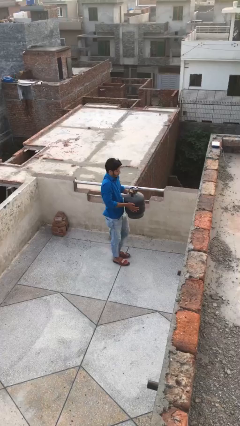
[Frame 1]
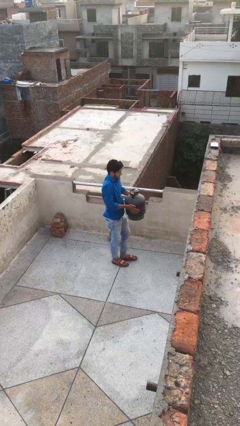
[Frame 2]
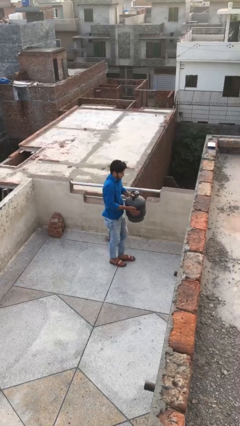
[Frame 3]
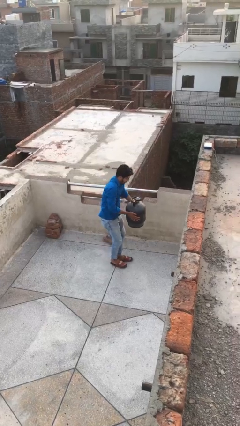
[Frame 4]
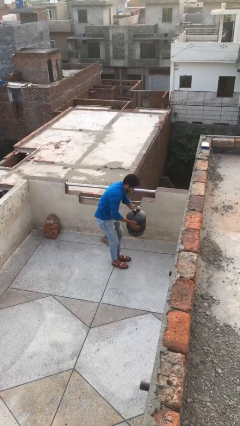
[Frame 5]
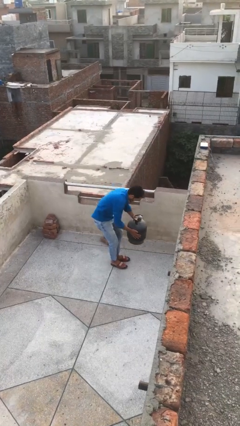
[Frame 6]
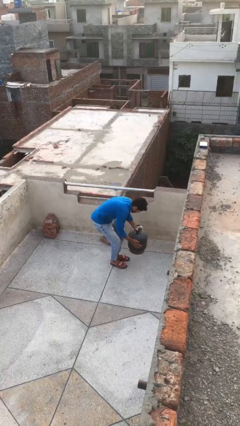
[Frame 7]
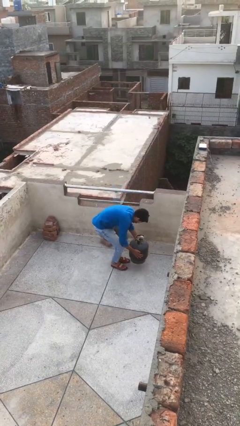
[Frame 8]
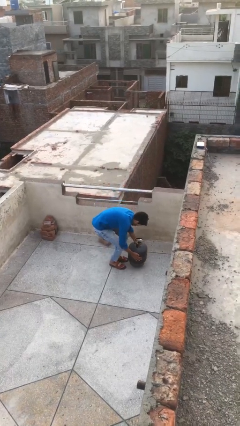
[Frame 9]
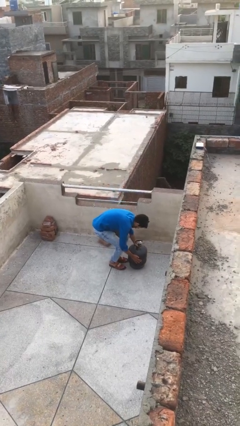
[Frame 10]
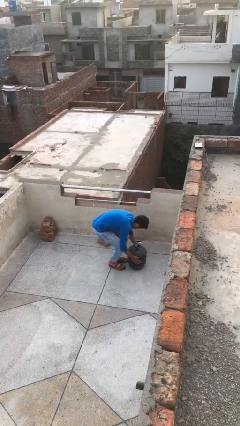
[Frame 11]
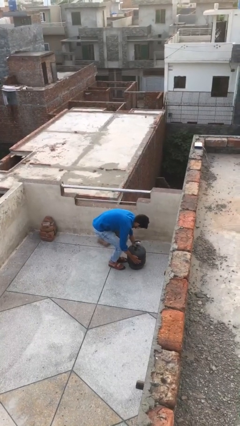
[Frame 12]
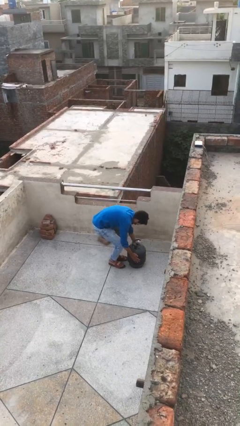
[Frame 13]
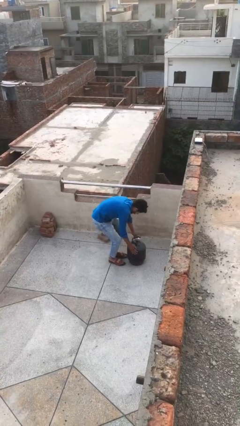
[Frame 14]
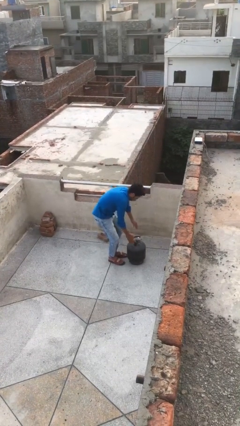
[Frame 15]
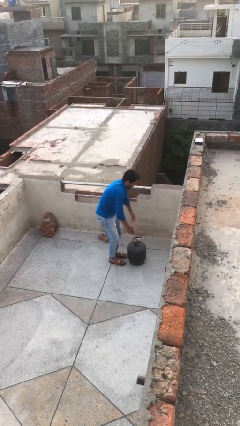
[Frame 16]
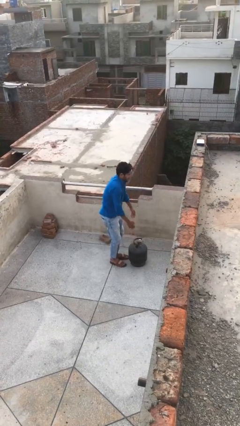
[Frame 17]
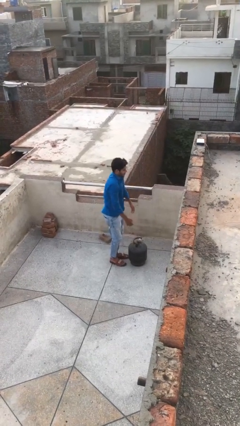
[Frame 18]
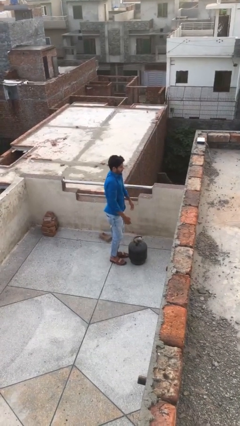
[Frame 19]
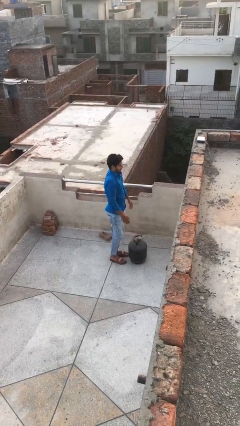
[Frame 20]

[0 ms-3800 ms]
person puts down object on floor

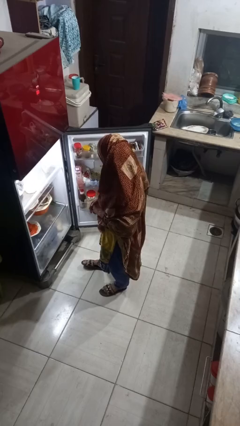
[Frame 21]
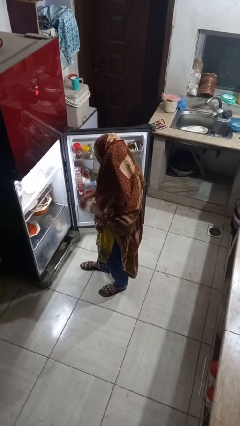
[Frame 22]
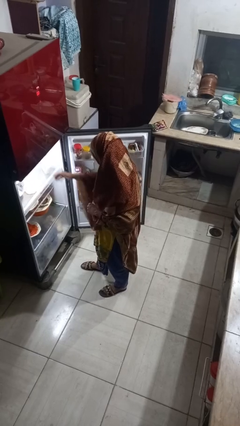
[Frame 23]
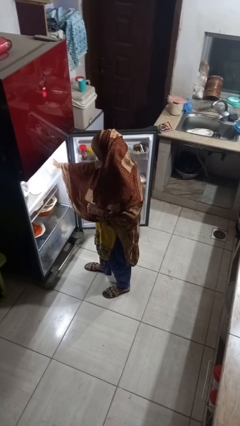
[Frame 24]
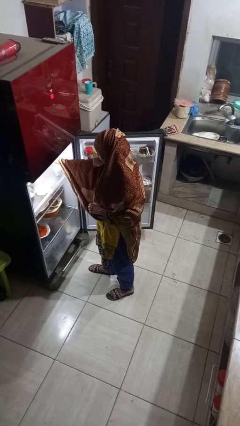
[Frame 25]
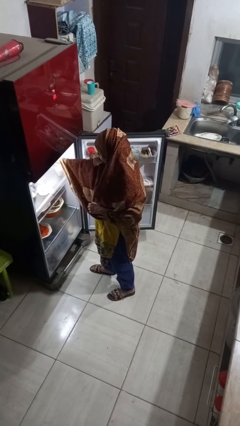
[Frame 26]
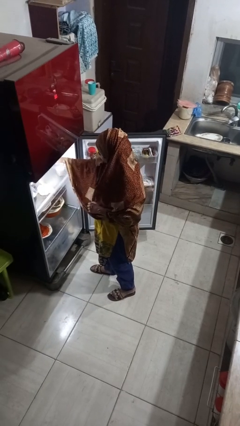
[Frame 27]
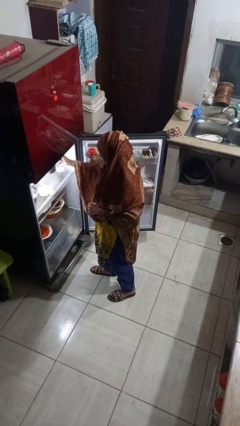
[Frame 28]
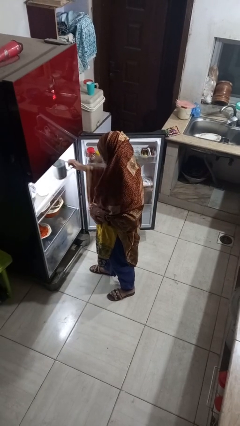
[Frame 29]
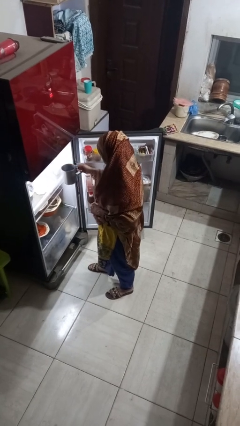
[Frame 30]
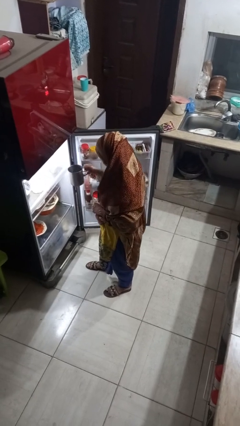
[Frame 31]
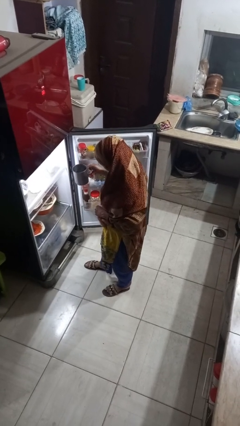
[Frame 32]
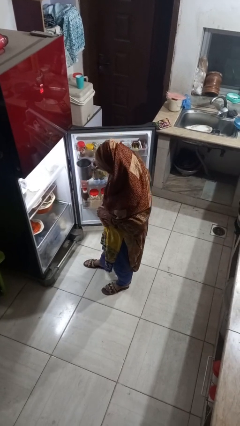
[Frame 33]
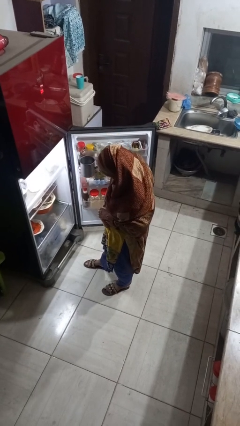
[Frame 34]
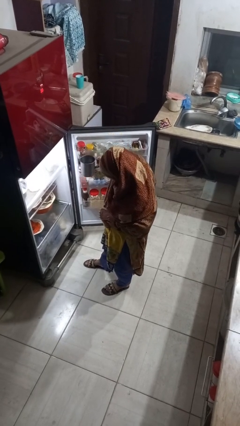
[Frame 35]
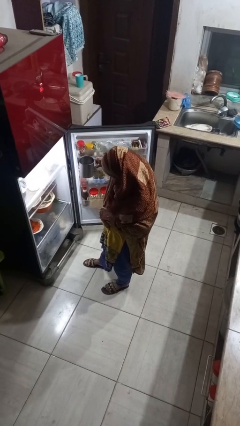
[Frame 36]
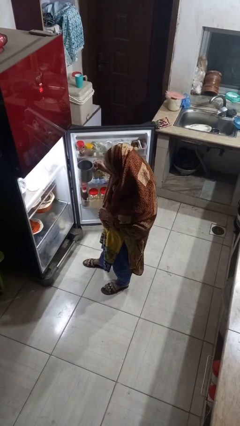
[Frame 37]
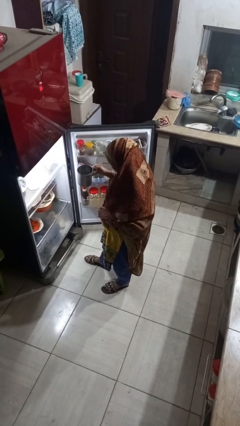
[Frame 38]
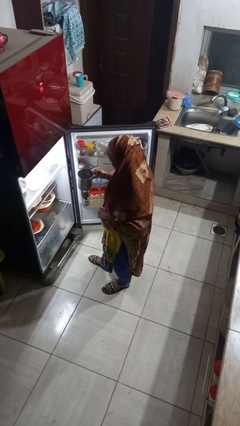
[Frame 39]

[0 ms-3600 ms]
person takes object from refrigerator

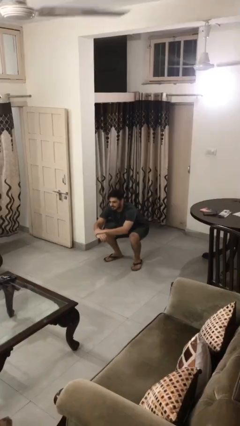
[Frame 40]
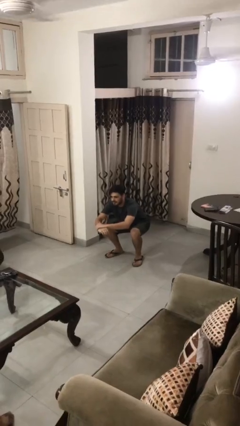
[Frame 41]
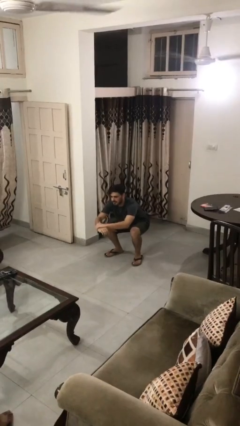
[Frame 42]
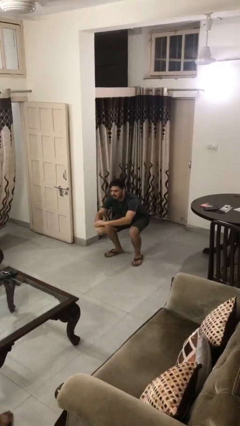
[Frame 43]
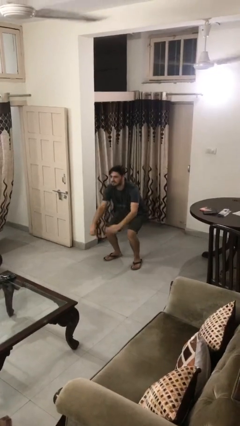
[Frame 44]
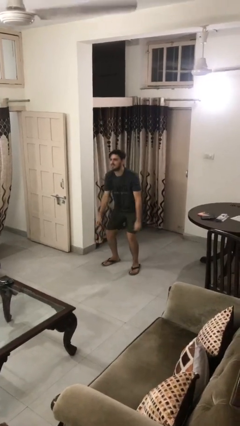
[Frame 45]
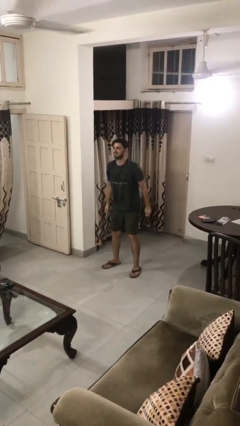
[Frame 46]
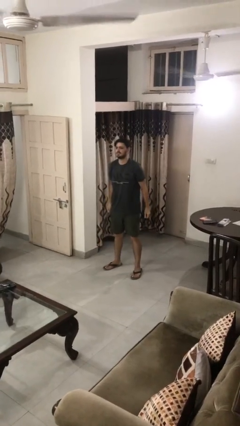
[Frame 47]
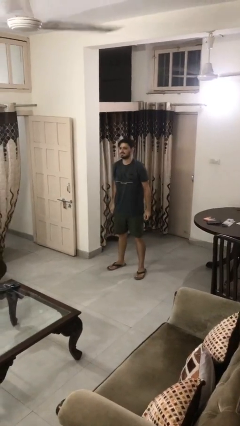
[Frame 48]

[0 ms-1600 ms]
person stands up

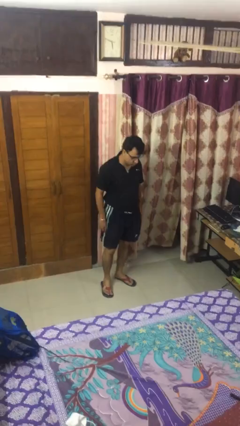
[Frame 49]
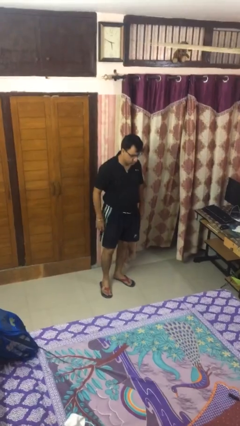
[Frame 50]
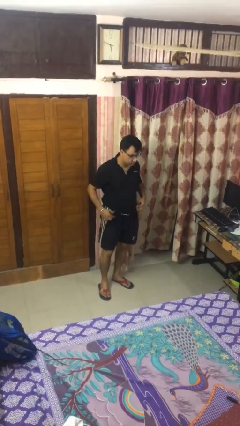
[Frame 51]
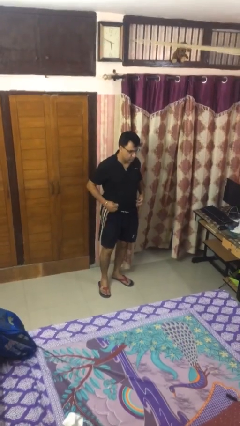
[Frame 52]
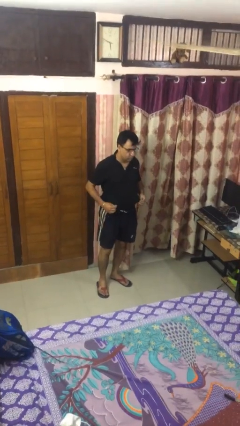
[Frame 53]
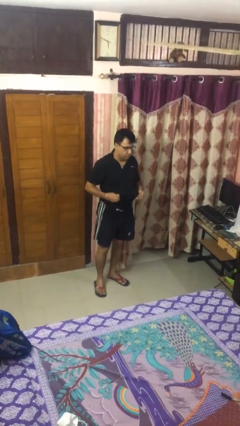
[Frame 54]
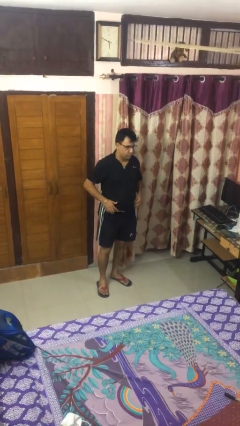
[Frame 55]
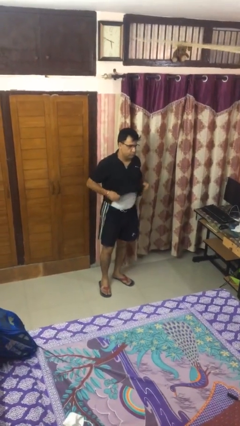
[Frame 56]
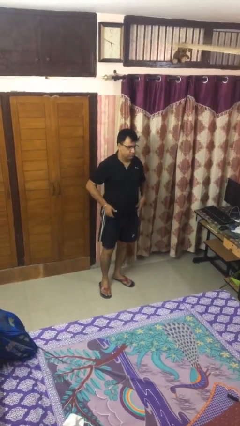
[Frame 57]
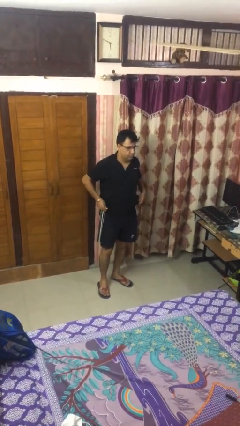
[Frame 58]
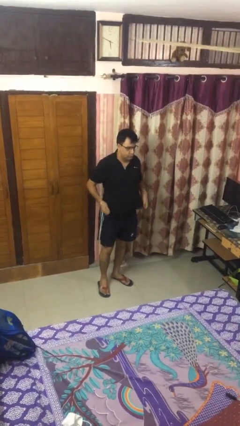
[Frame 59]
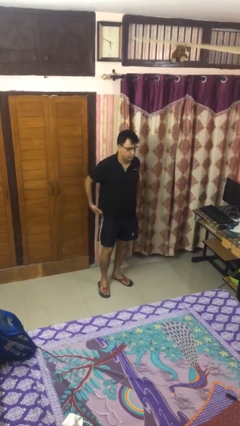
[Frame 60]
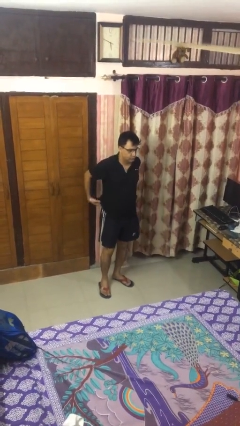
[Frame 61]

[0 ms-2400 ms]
person untucks shirt

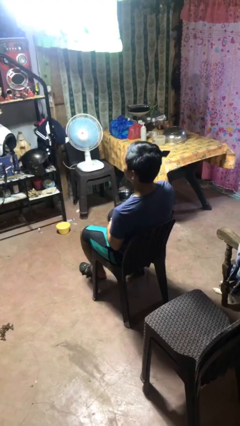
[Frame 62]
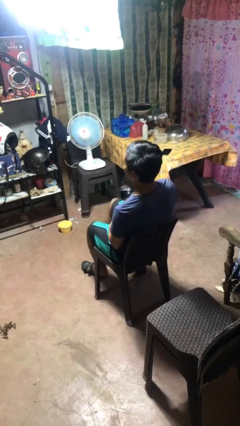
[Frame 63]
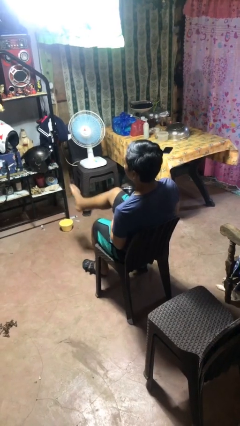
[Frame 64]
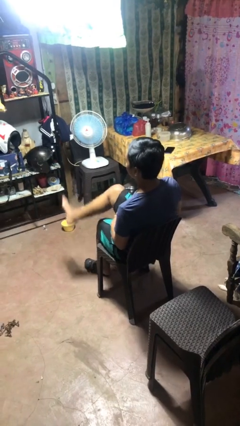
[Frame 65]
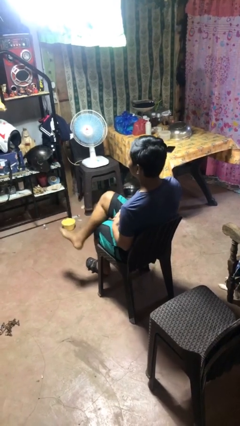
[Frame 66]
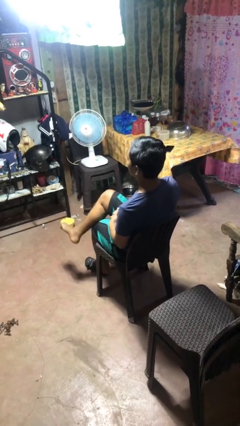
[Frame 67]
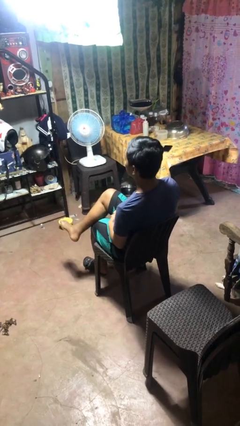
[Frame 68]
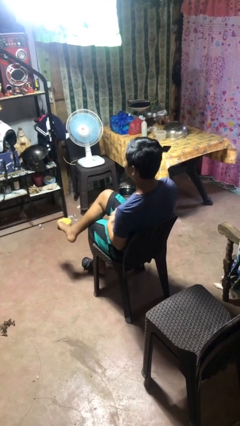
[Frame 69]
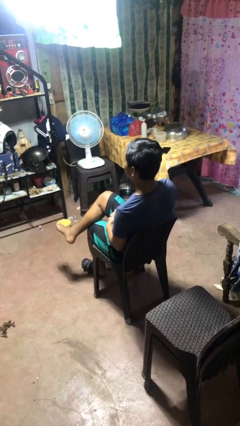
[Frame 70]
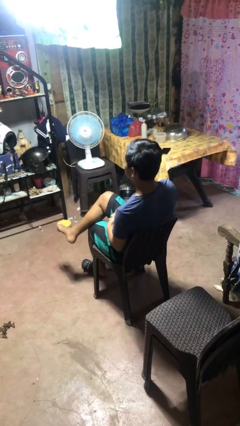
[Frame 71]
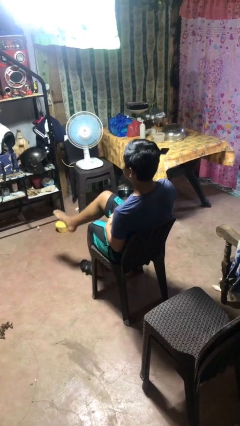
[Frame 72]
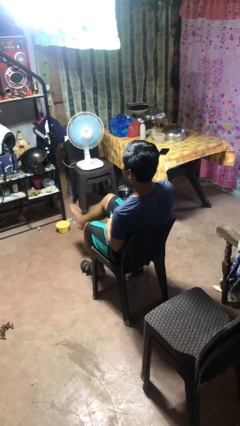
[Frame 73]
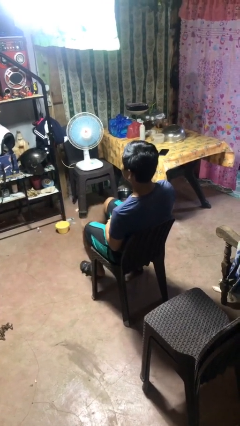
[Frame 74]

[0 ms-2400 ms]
person crosses legs

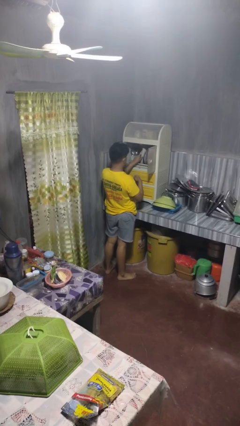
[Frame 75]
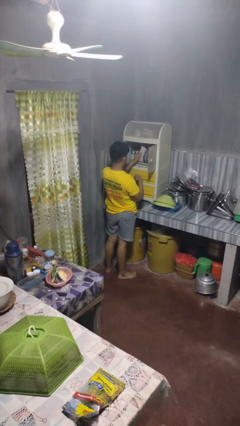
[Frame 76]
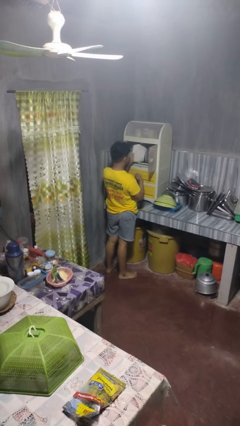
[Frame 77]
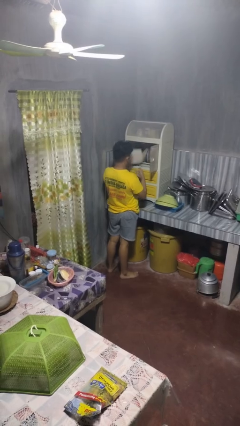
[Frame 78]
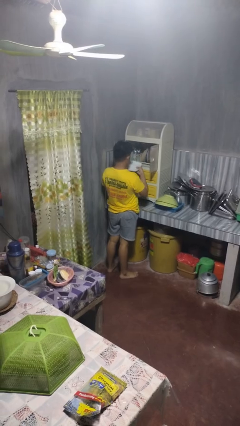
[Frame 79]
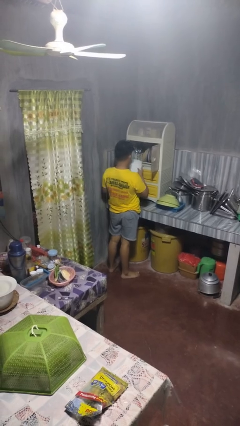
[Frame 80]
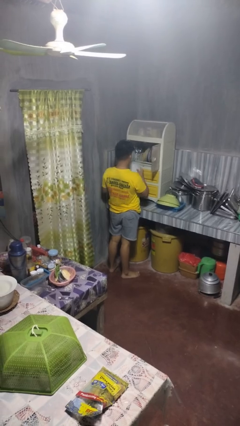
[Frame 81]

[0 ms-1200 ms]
person takes object from cabinet

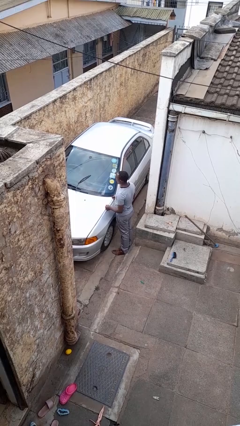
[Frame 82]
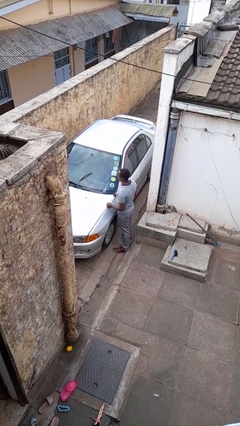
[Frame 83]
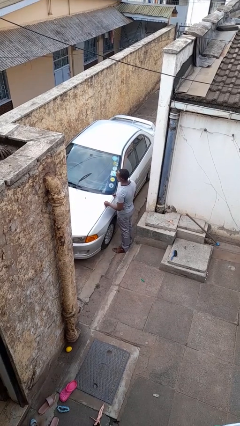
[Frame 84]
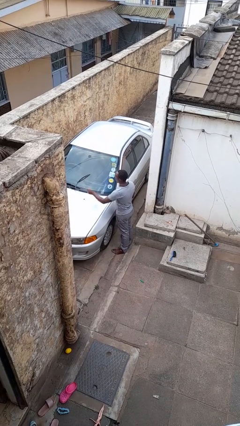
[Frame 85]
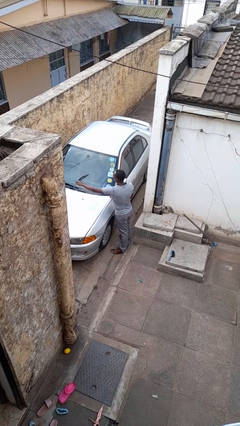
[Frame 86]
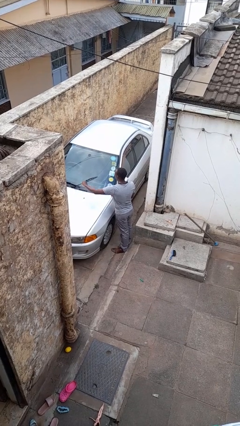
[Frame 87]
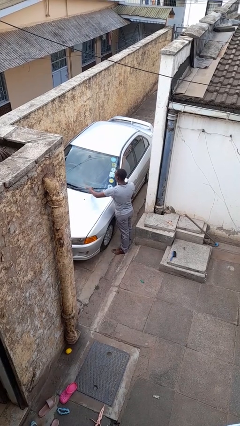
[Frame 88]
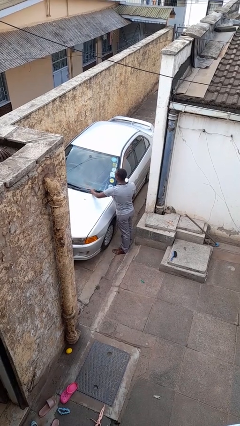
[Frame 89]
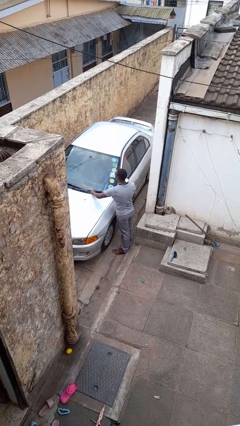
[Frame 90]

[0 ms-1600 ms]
person flips down car wipers

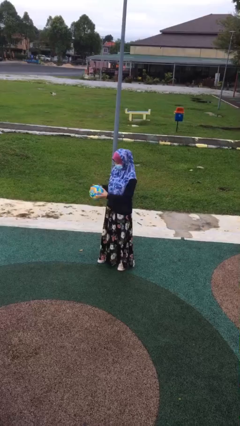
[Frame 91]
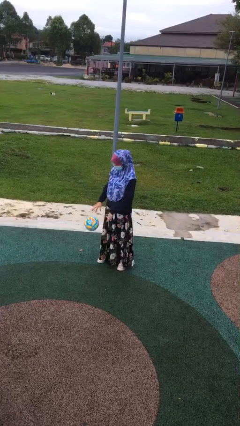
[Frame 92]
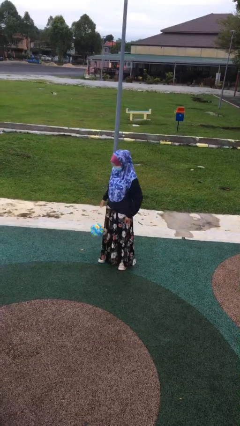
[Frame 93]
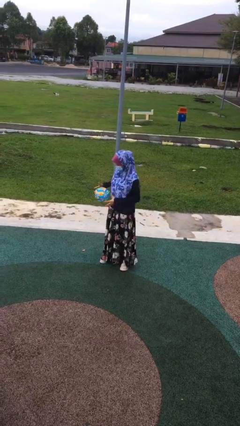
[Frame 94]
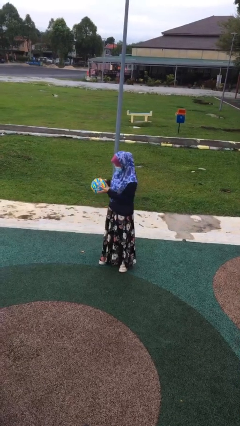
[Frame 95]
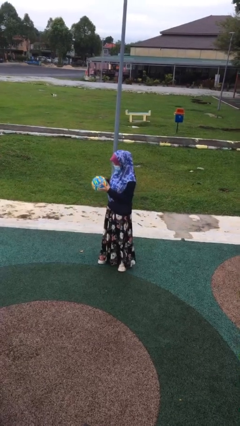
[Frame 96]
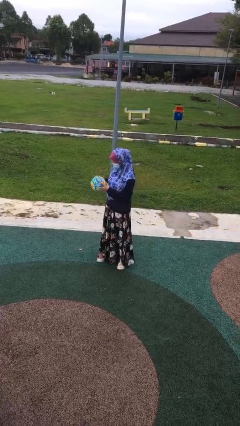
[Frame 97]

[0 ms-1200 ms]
person bounces ball on floor
